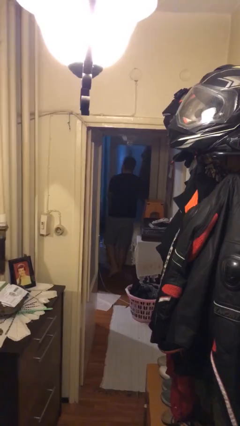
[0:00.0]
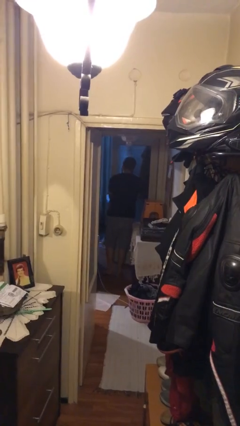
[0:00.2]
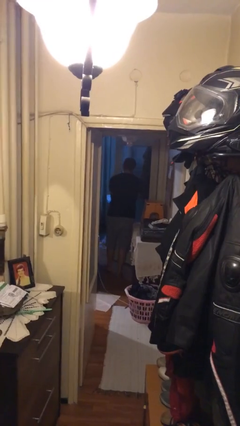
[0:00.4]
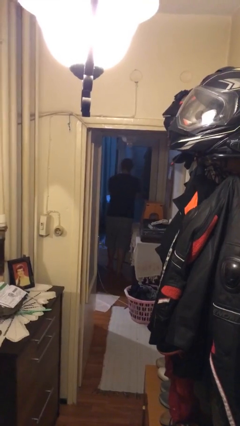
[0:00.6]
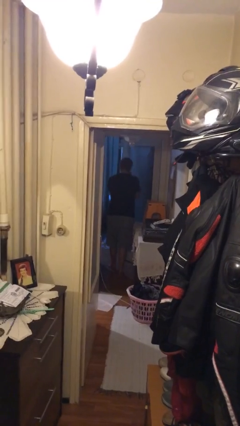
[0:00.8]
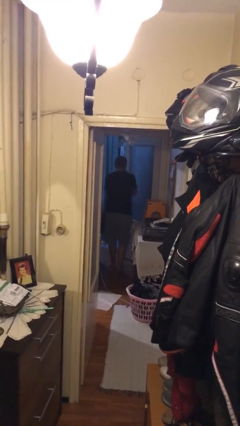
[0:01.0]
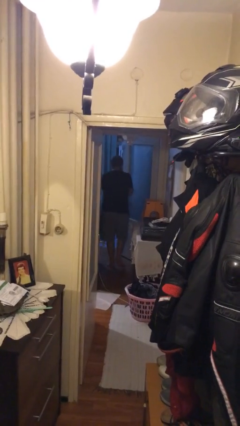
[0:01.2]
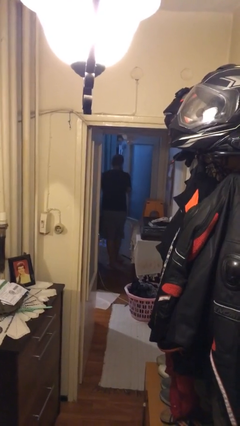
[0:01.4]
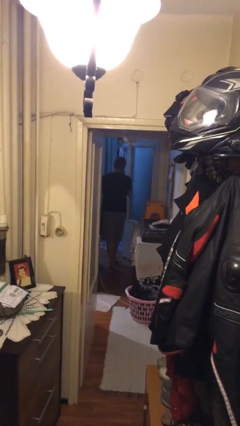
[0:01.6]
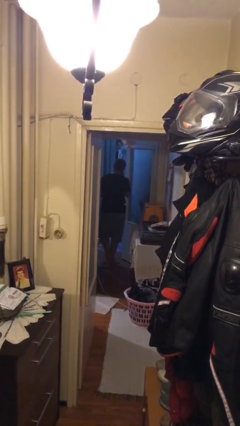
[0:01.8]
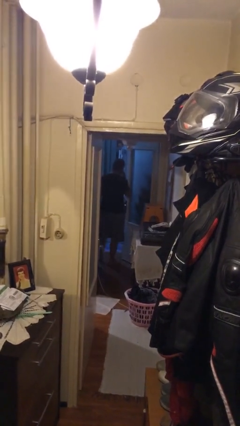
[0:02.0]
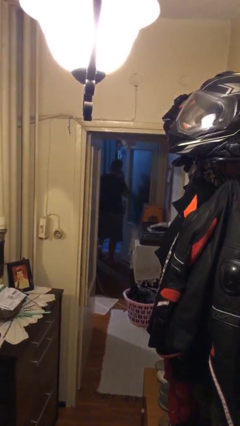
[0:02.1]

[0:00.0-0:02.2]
person exits scene through structure

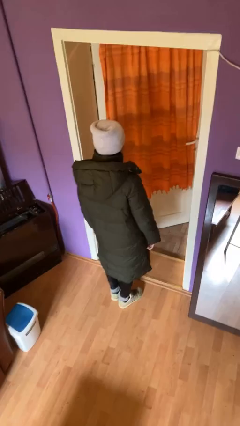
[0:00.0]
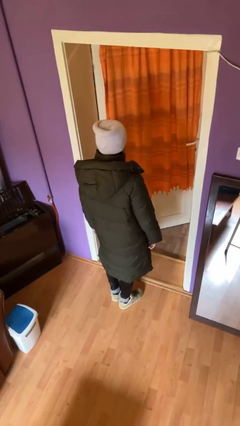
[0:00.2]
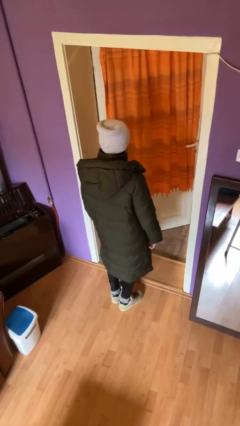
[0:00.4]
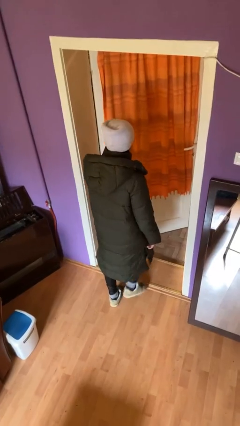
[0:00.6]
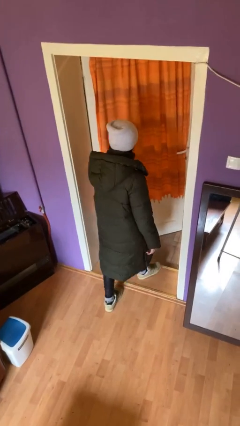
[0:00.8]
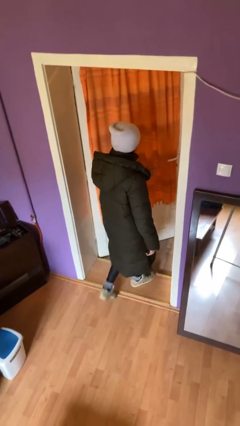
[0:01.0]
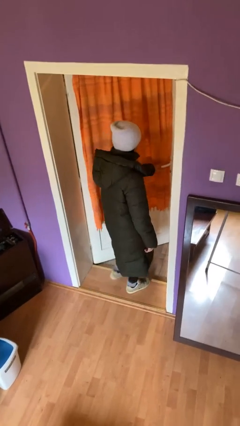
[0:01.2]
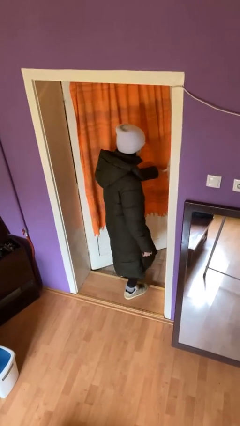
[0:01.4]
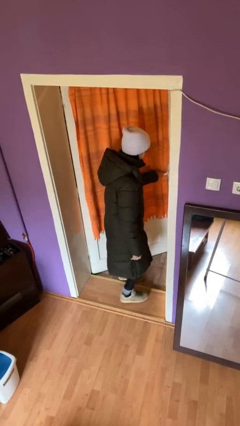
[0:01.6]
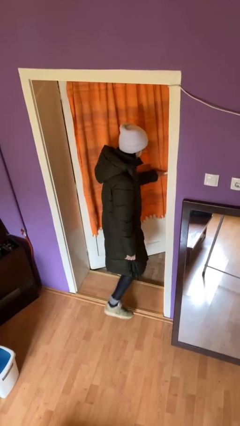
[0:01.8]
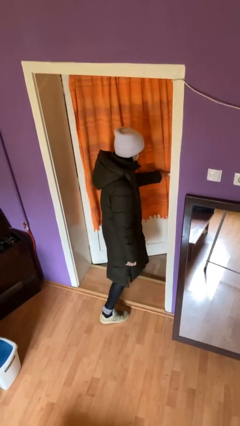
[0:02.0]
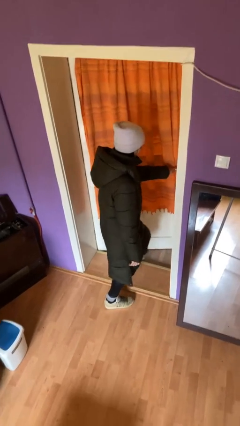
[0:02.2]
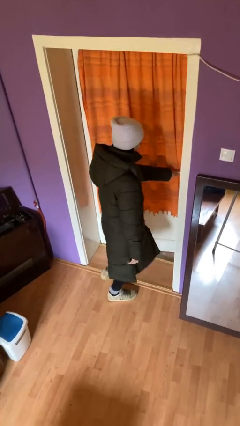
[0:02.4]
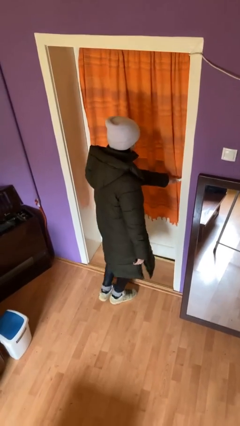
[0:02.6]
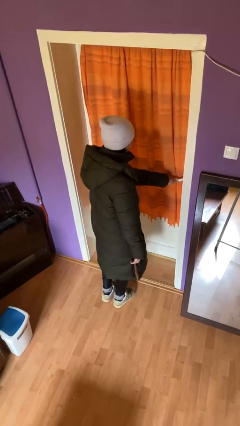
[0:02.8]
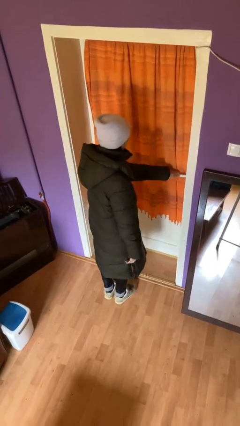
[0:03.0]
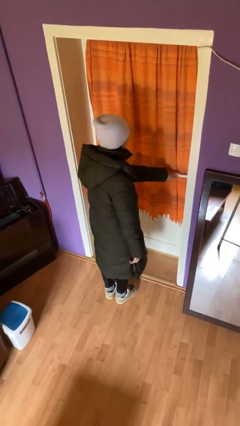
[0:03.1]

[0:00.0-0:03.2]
person closes facility door

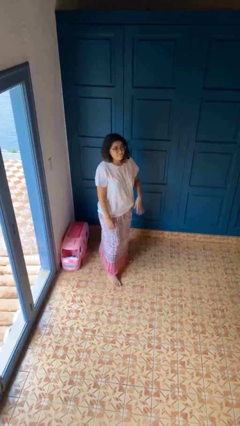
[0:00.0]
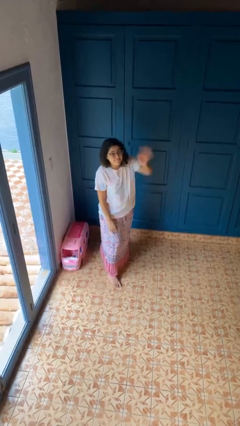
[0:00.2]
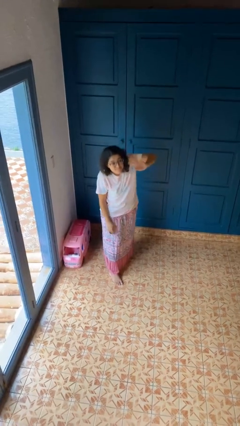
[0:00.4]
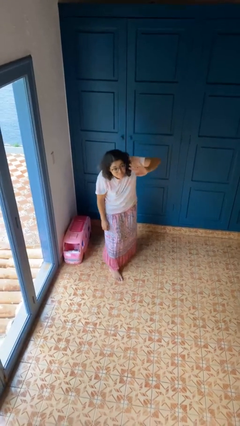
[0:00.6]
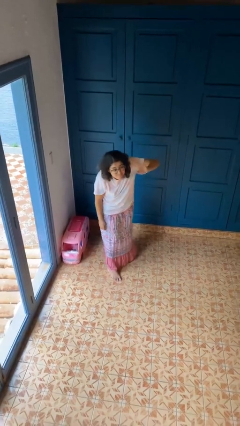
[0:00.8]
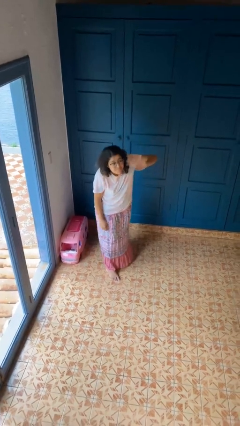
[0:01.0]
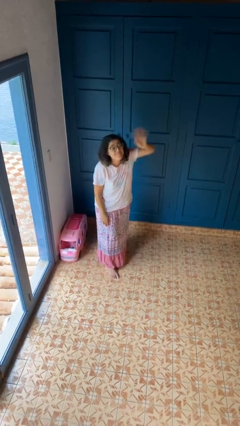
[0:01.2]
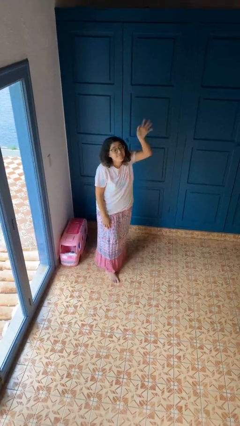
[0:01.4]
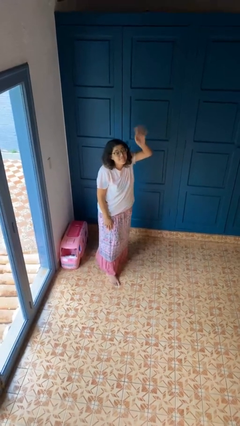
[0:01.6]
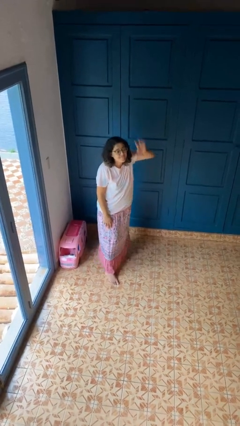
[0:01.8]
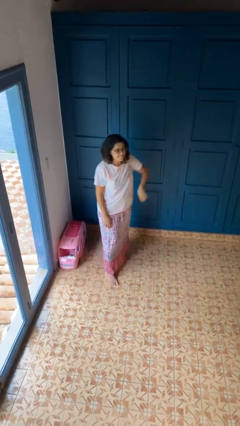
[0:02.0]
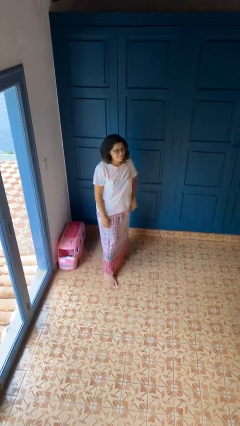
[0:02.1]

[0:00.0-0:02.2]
person waves at person

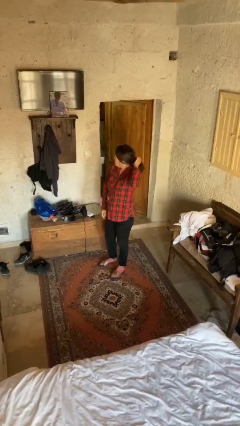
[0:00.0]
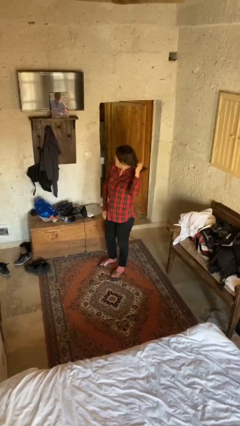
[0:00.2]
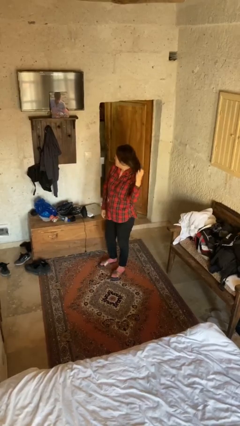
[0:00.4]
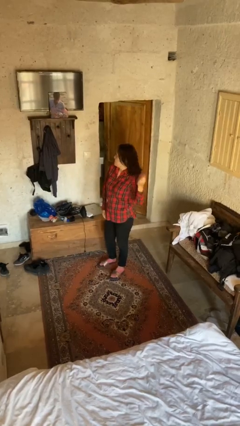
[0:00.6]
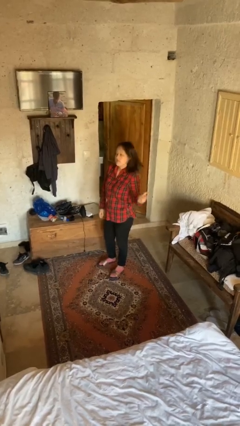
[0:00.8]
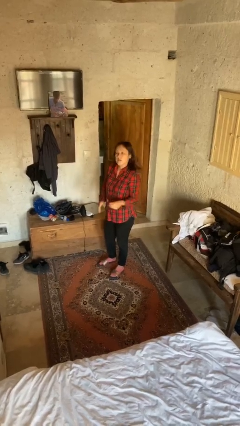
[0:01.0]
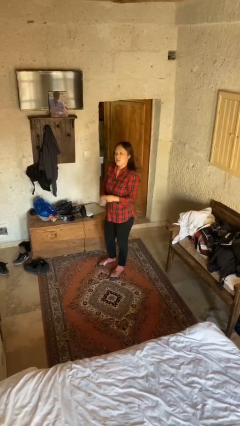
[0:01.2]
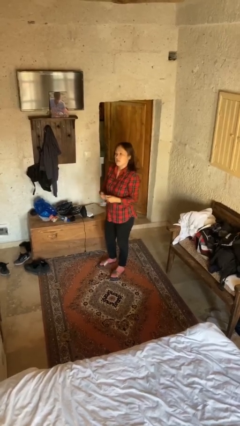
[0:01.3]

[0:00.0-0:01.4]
person takes off hairtie

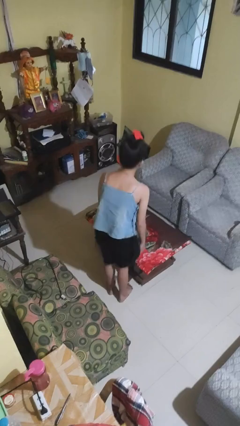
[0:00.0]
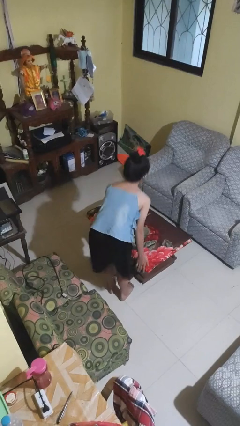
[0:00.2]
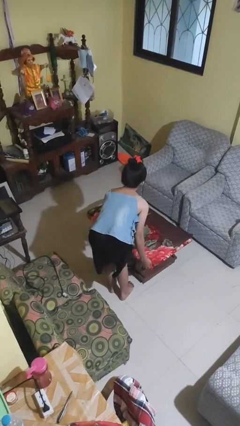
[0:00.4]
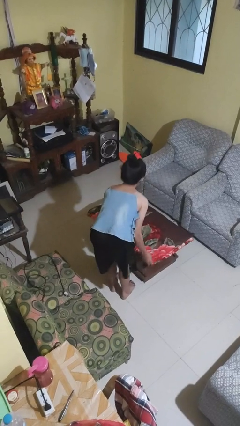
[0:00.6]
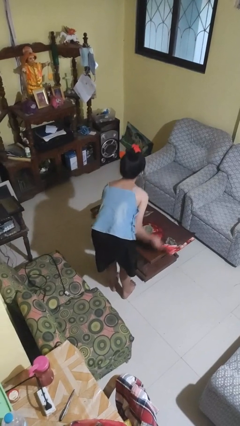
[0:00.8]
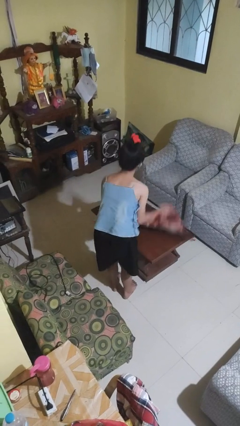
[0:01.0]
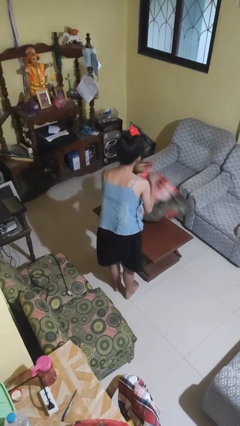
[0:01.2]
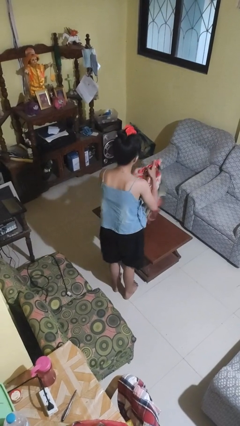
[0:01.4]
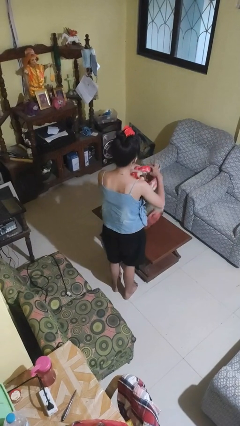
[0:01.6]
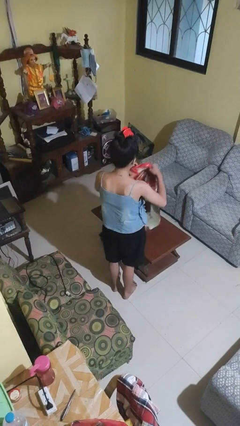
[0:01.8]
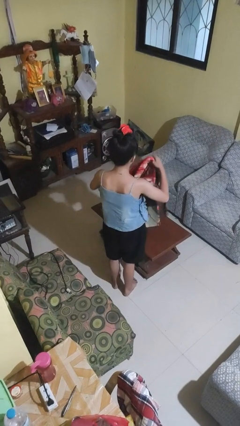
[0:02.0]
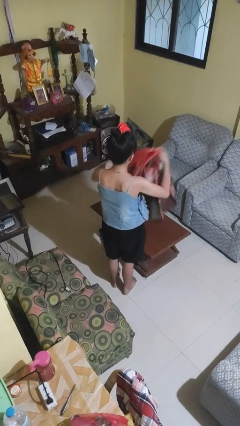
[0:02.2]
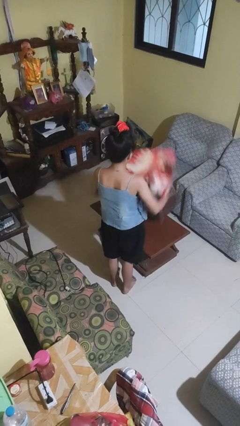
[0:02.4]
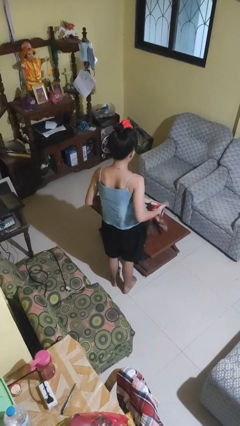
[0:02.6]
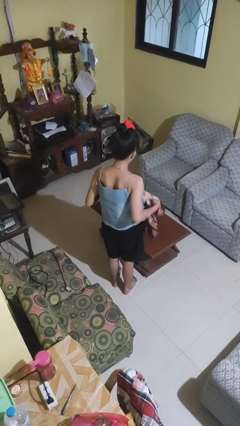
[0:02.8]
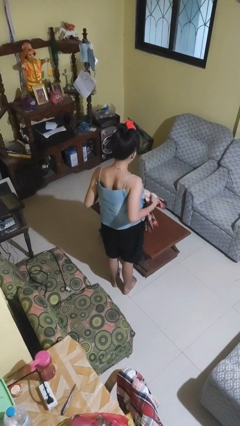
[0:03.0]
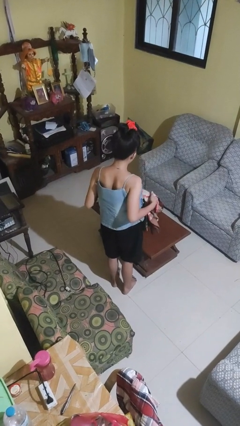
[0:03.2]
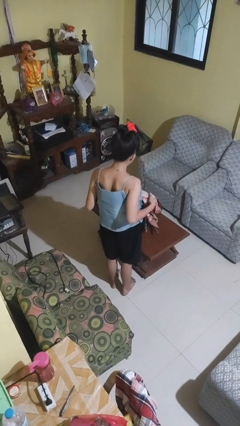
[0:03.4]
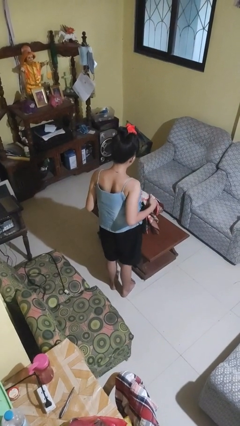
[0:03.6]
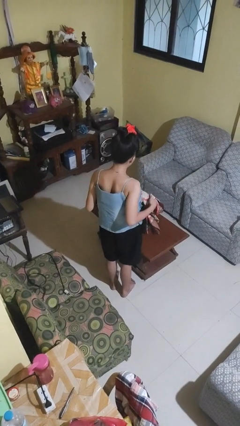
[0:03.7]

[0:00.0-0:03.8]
person folds tablecloth

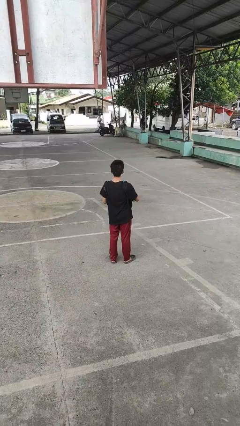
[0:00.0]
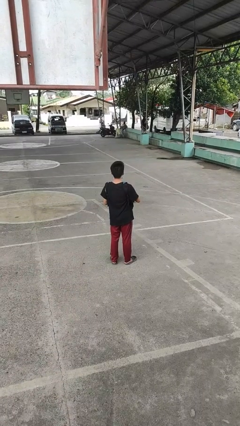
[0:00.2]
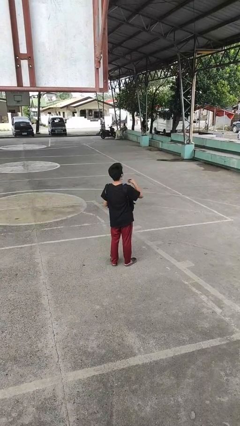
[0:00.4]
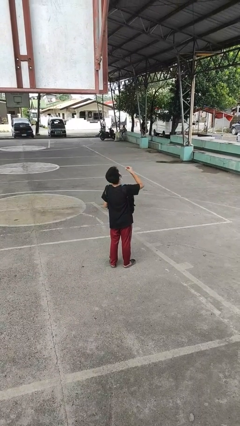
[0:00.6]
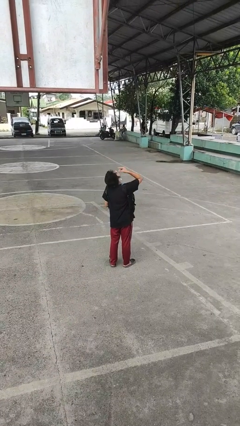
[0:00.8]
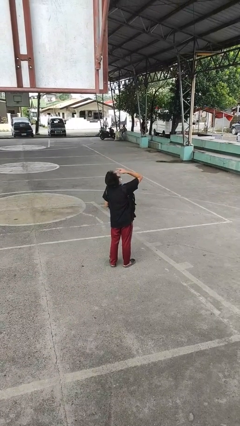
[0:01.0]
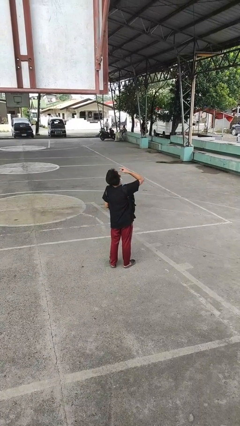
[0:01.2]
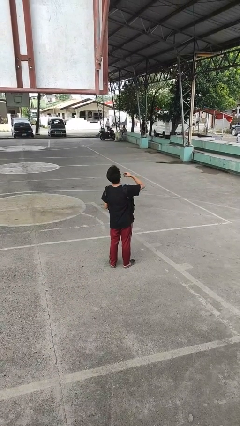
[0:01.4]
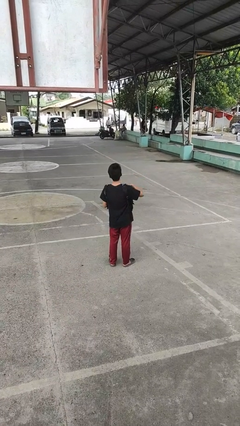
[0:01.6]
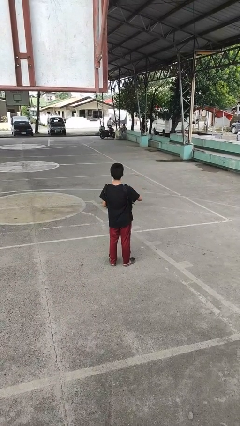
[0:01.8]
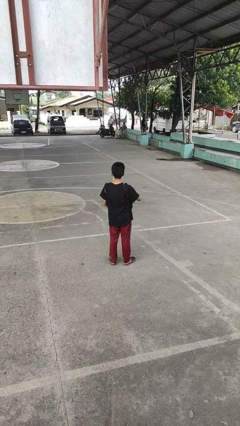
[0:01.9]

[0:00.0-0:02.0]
person eats snack from bag

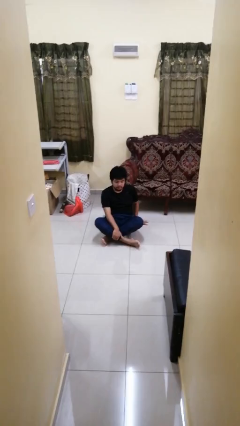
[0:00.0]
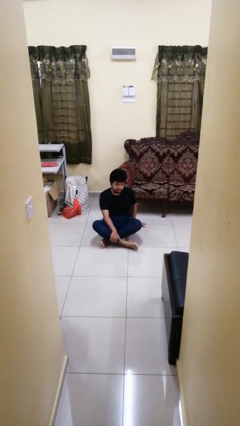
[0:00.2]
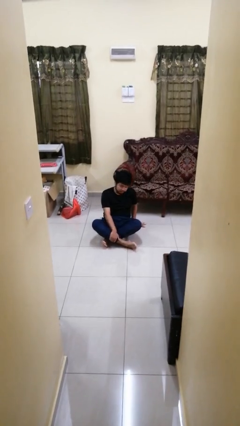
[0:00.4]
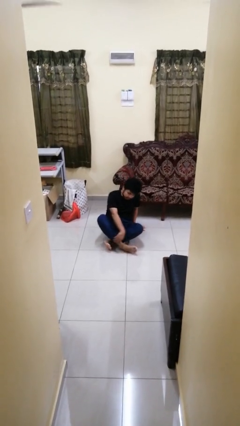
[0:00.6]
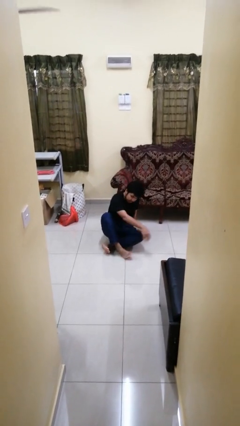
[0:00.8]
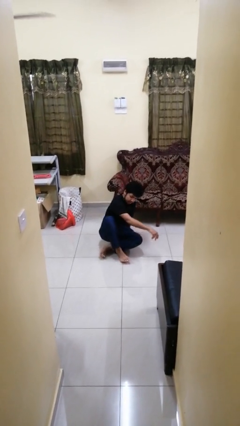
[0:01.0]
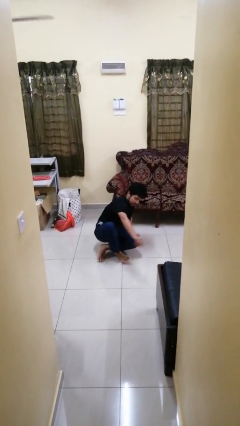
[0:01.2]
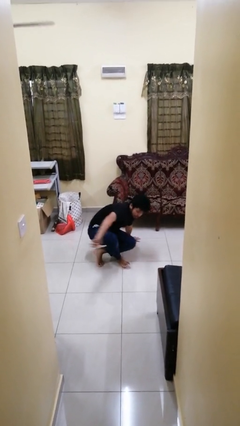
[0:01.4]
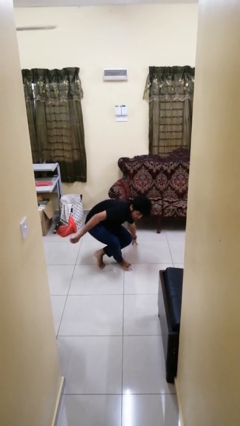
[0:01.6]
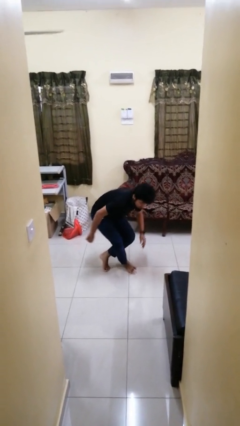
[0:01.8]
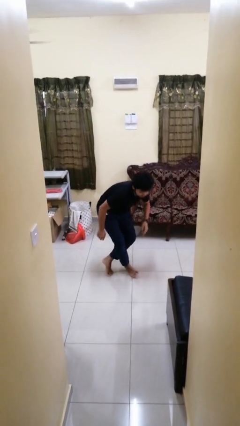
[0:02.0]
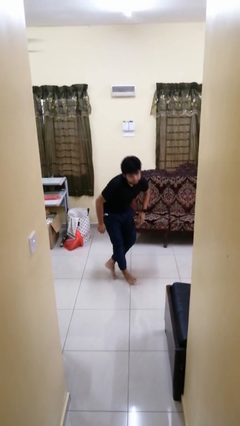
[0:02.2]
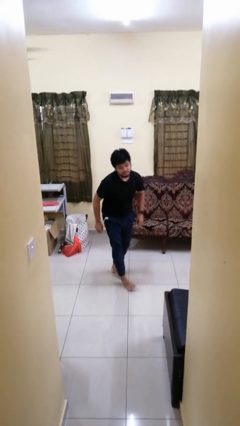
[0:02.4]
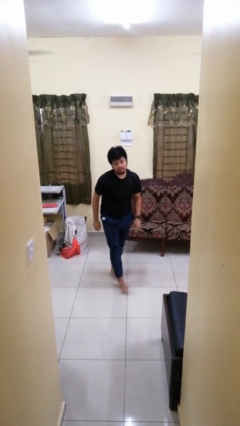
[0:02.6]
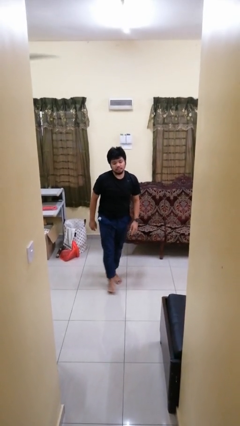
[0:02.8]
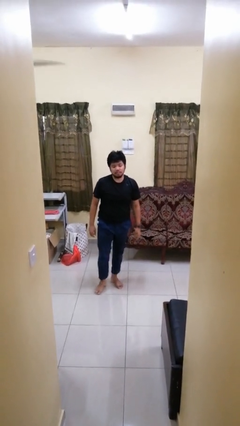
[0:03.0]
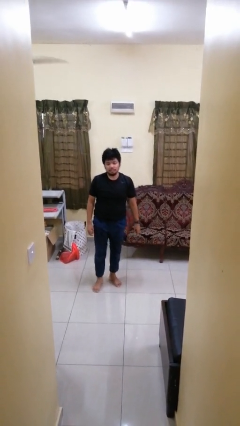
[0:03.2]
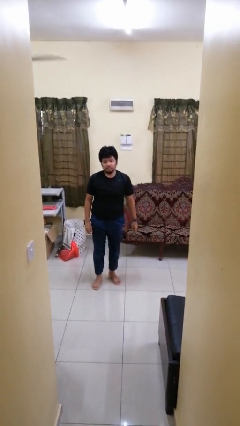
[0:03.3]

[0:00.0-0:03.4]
person stands up from floor
